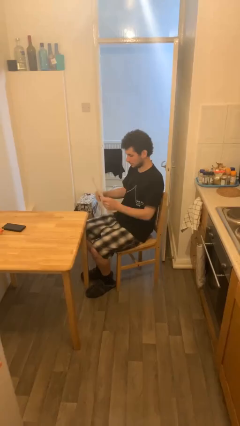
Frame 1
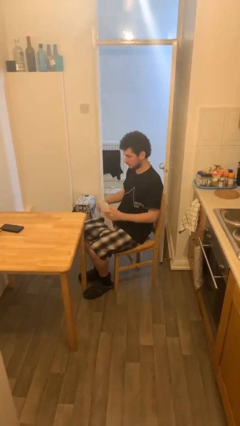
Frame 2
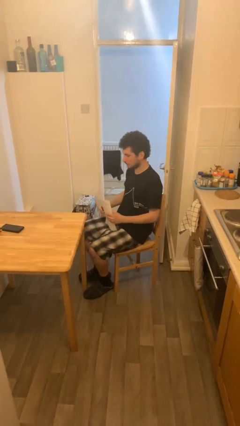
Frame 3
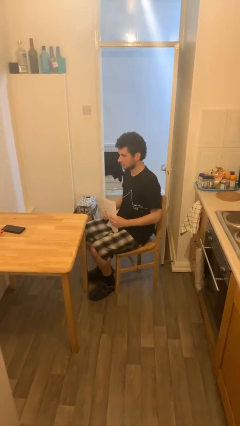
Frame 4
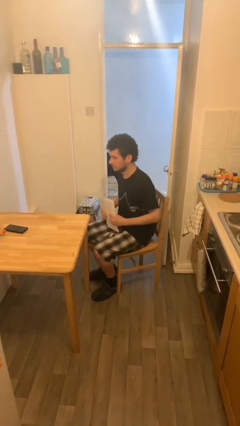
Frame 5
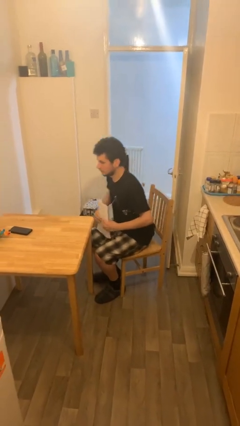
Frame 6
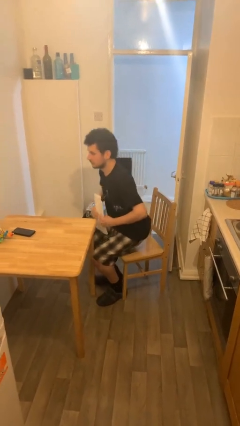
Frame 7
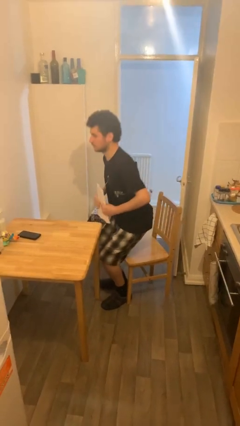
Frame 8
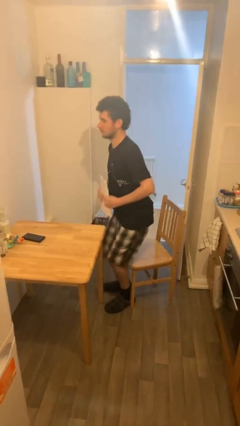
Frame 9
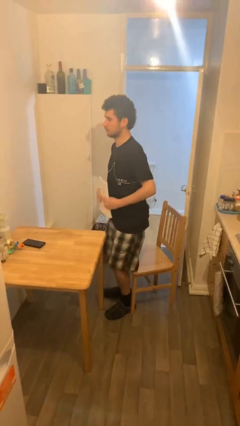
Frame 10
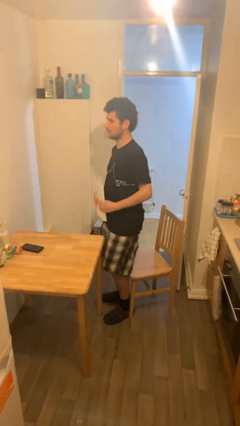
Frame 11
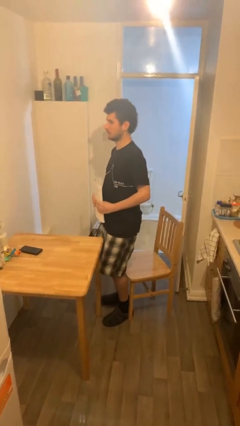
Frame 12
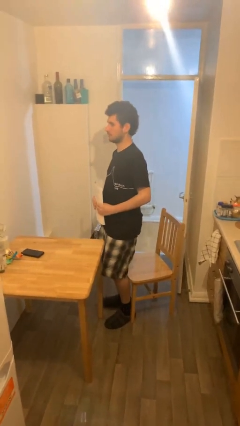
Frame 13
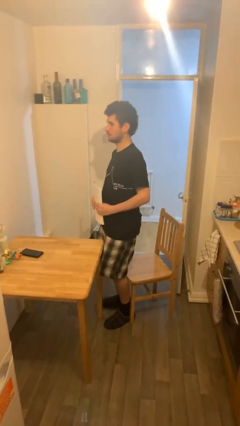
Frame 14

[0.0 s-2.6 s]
person stands up

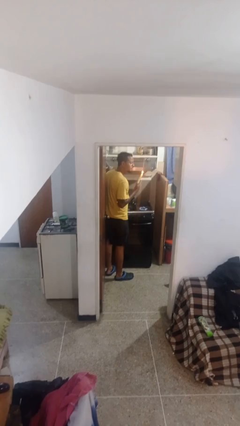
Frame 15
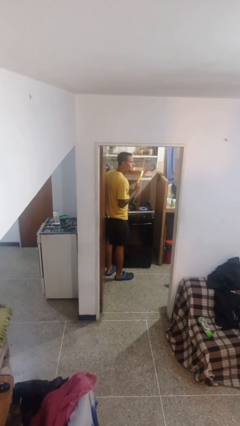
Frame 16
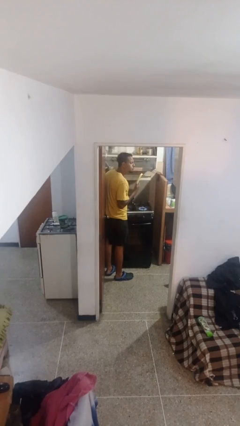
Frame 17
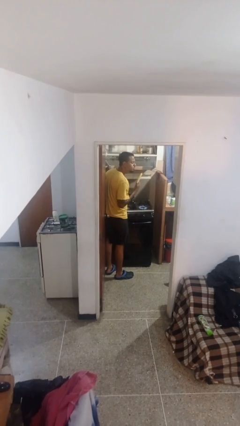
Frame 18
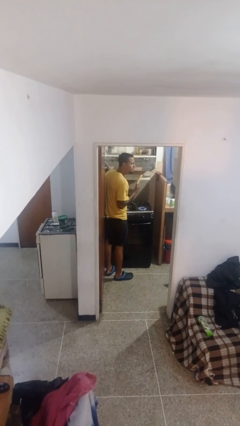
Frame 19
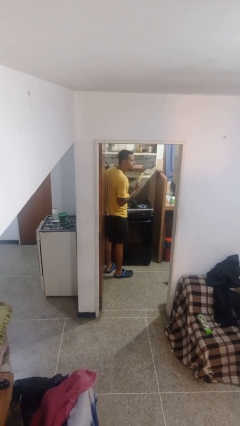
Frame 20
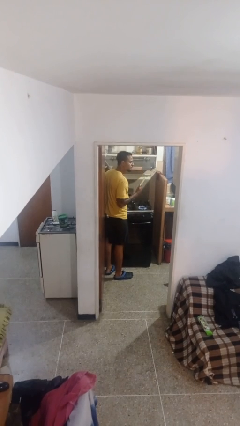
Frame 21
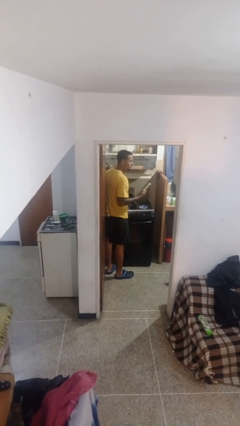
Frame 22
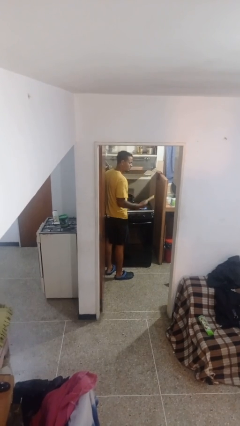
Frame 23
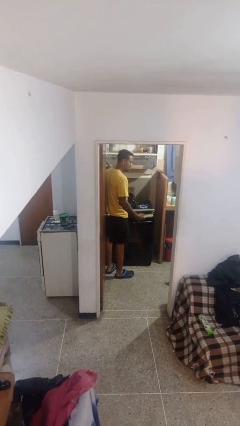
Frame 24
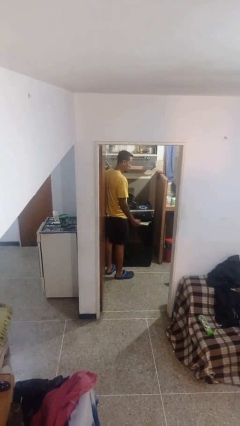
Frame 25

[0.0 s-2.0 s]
person extinguishes candle

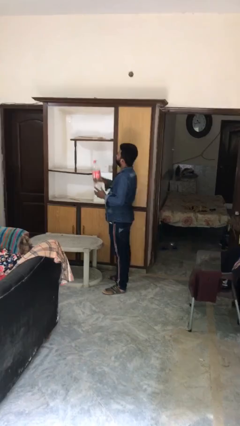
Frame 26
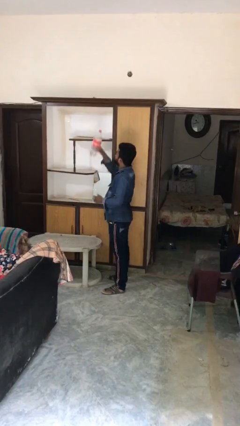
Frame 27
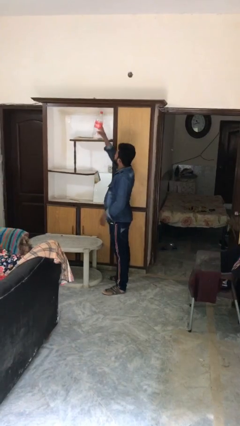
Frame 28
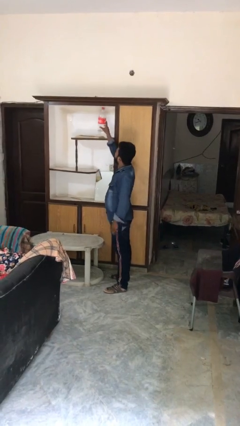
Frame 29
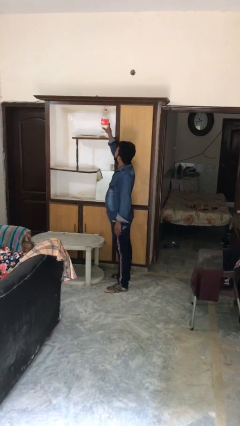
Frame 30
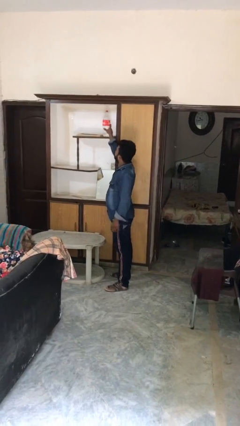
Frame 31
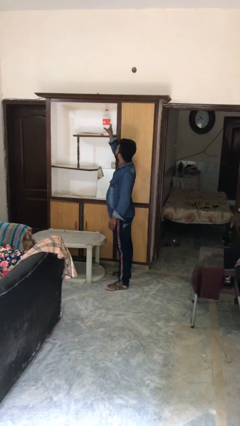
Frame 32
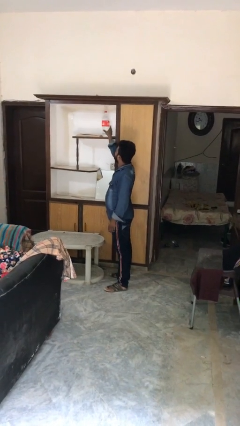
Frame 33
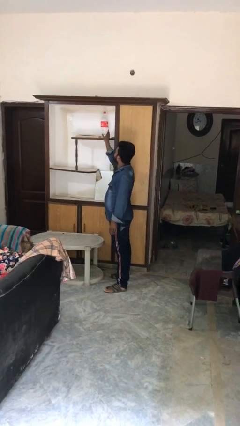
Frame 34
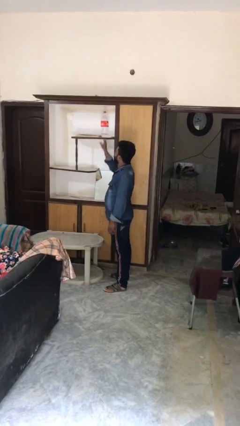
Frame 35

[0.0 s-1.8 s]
person puts down object on shelf

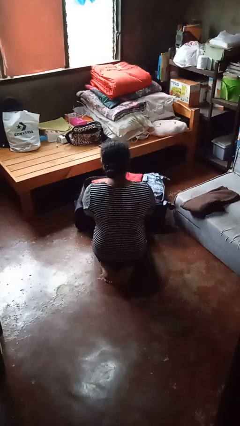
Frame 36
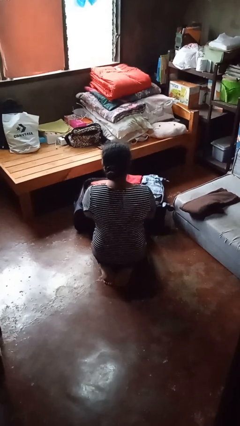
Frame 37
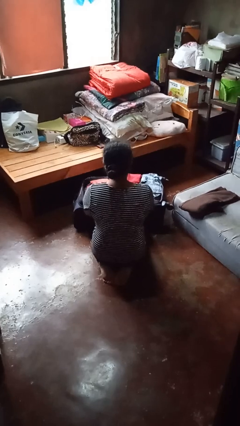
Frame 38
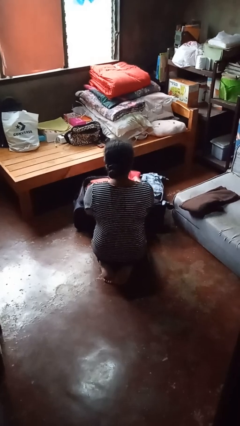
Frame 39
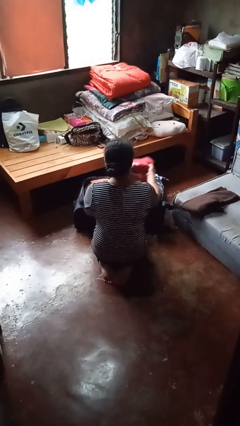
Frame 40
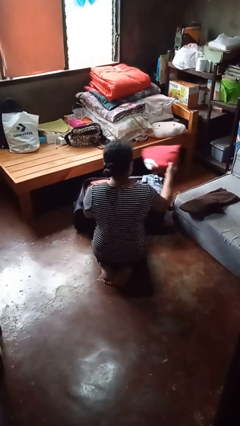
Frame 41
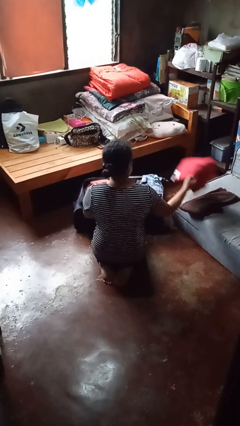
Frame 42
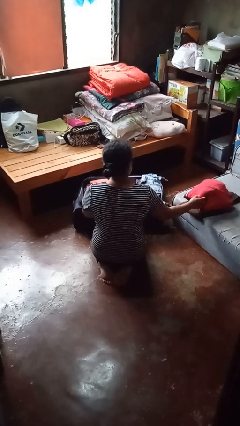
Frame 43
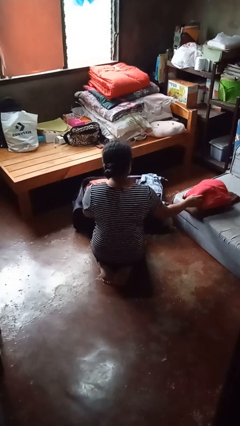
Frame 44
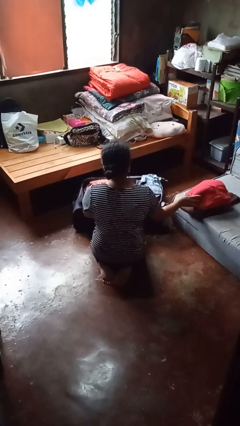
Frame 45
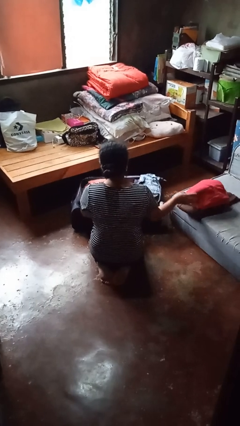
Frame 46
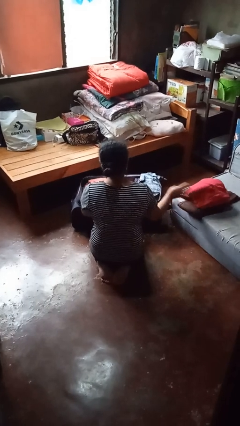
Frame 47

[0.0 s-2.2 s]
person unloads clothes from suitcase

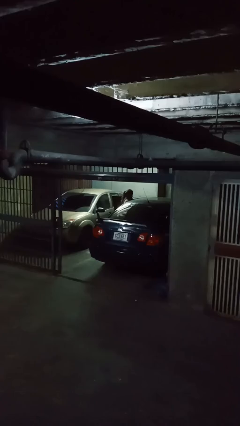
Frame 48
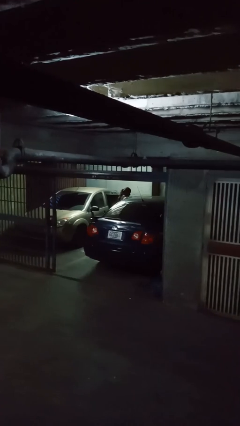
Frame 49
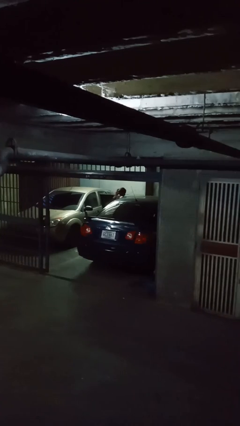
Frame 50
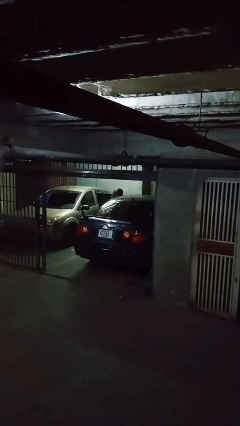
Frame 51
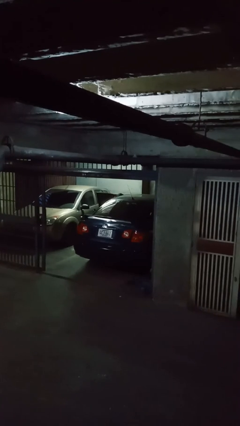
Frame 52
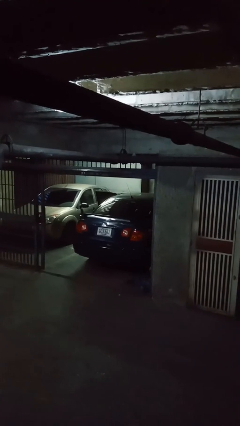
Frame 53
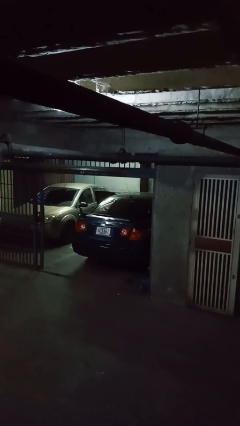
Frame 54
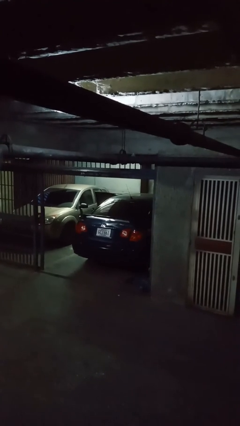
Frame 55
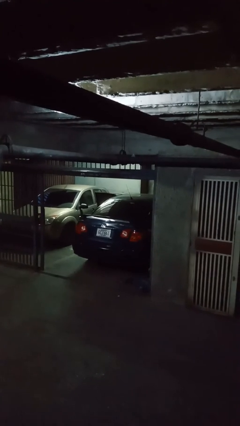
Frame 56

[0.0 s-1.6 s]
person enters car

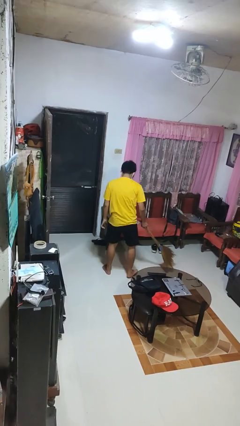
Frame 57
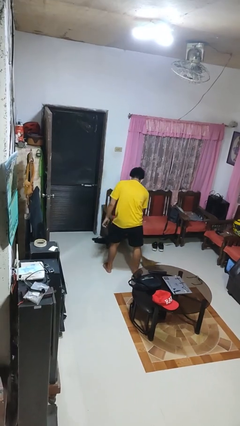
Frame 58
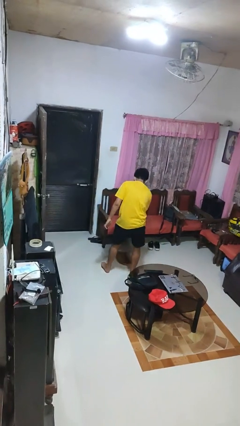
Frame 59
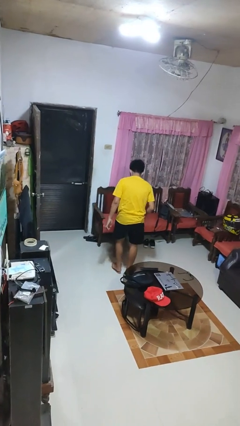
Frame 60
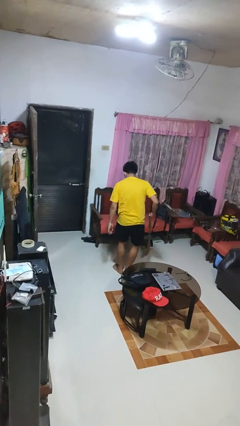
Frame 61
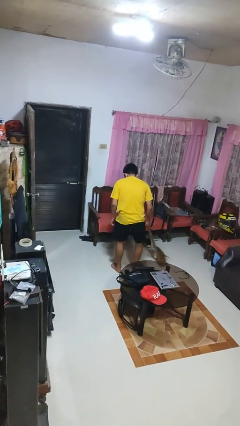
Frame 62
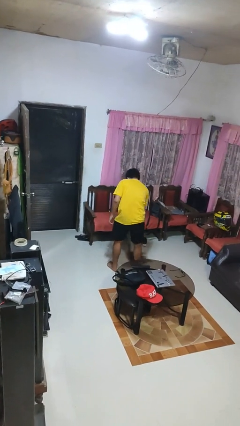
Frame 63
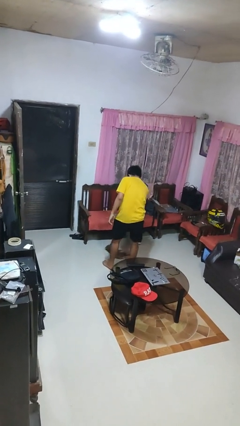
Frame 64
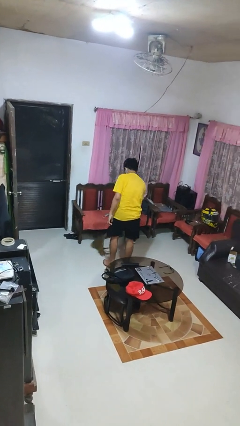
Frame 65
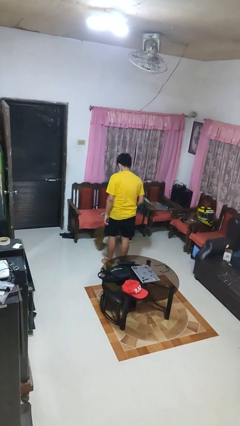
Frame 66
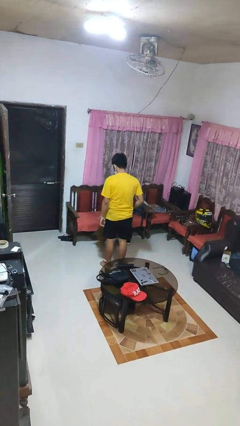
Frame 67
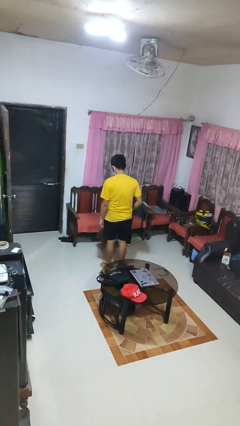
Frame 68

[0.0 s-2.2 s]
person sweeps floor

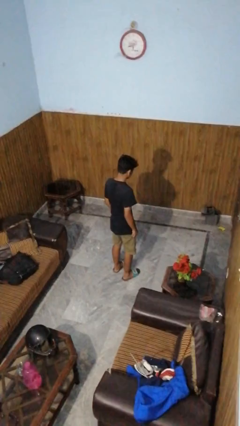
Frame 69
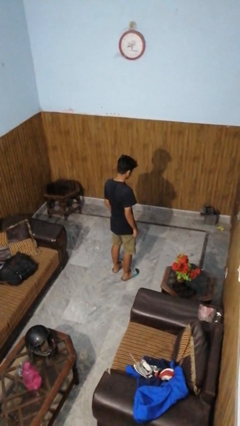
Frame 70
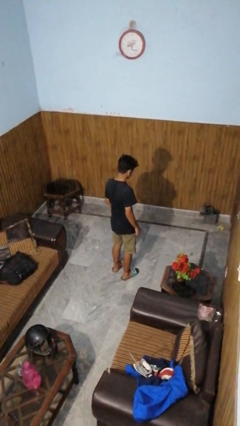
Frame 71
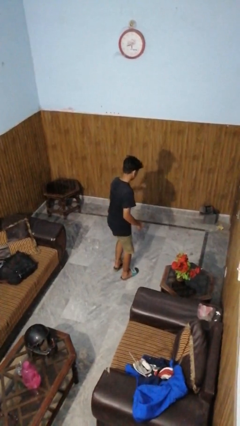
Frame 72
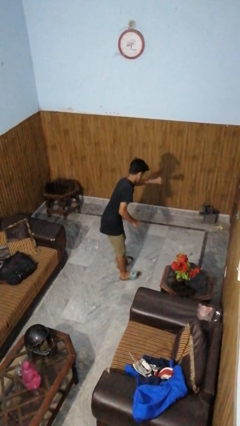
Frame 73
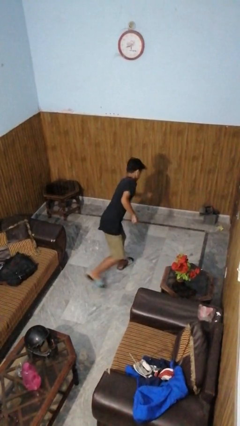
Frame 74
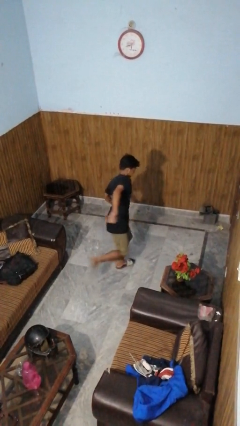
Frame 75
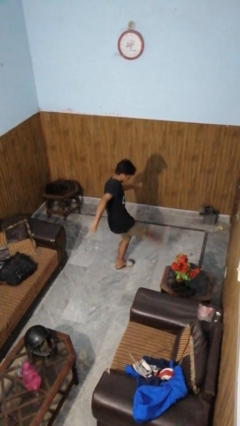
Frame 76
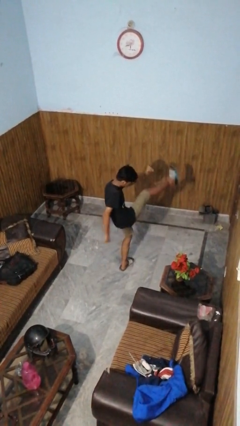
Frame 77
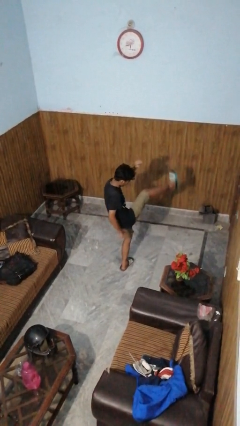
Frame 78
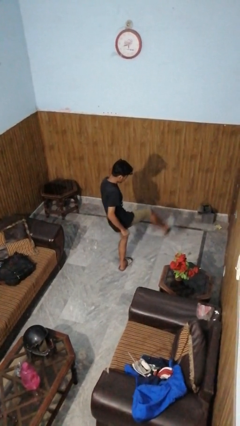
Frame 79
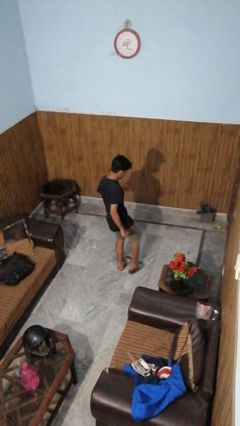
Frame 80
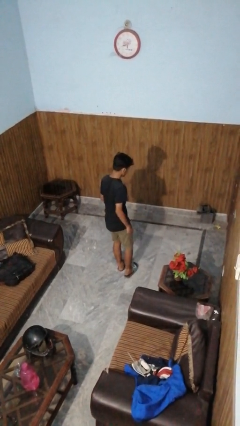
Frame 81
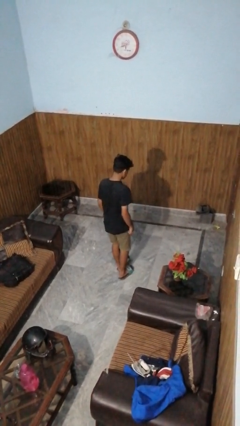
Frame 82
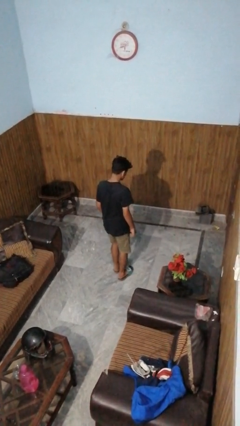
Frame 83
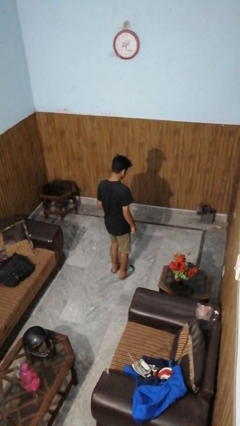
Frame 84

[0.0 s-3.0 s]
person karate kicks

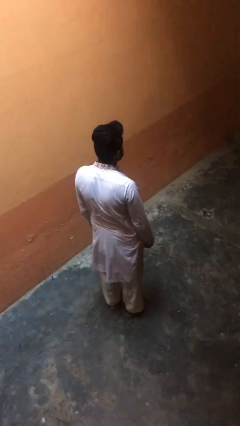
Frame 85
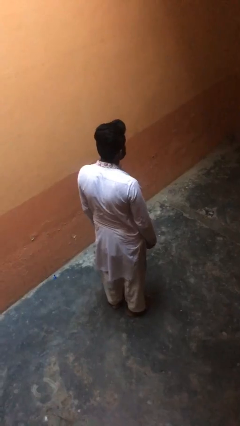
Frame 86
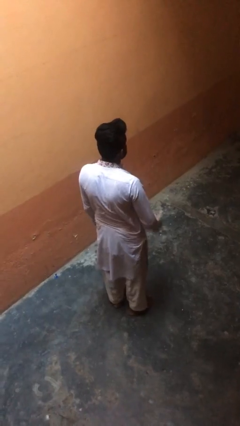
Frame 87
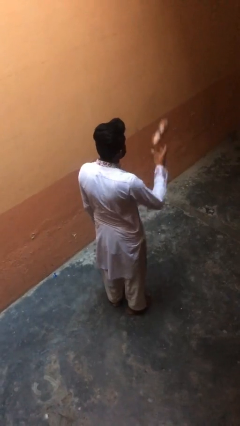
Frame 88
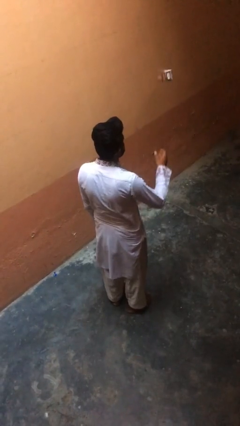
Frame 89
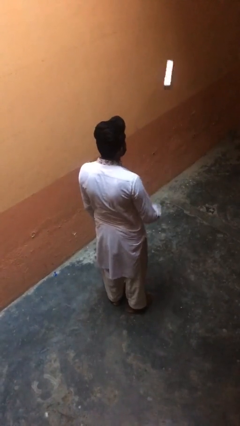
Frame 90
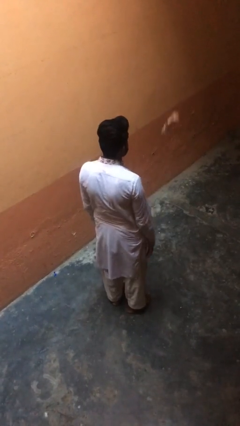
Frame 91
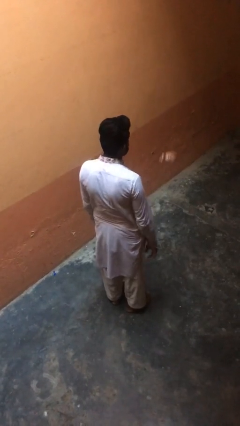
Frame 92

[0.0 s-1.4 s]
person throws object into air

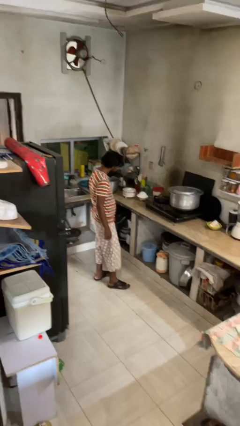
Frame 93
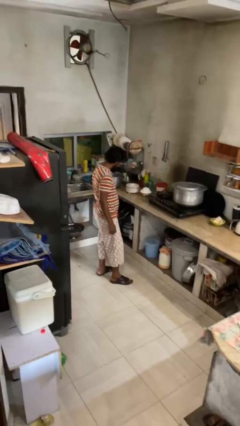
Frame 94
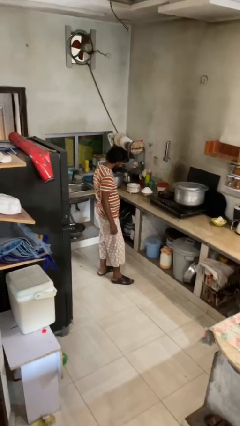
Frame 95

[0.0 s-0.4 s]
person puts down object into cabinet
